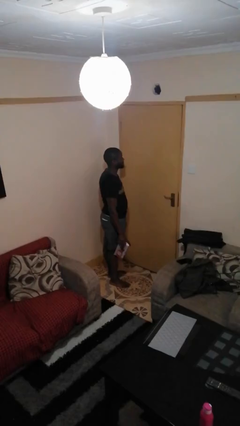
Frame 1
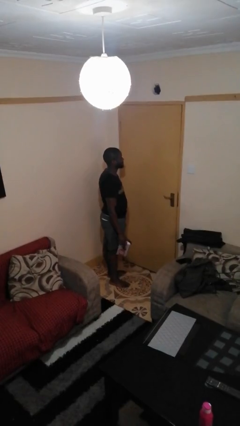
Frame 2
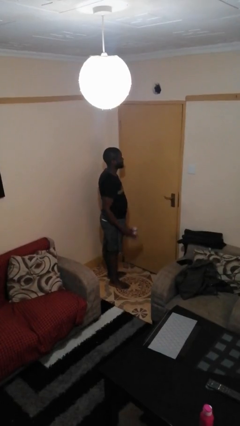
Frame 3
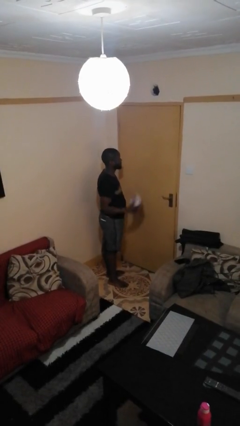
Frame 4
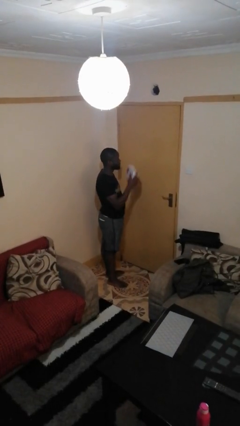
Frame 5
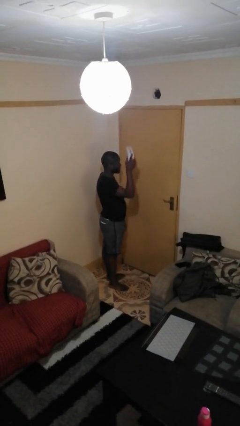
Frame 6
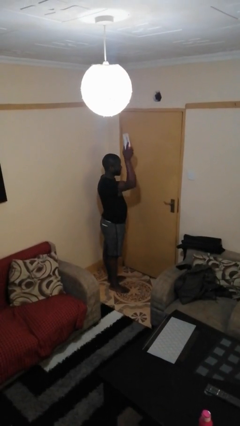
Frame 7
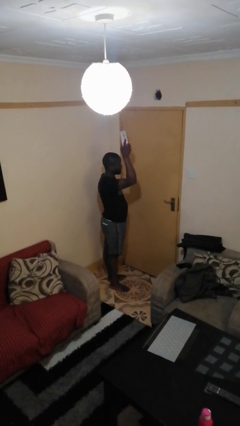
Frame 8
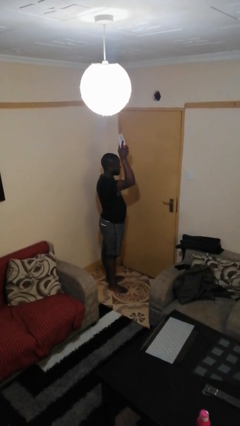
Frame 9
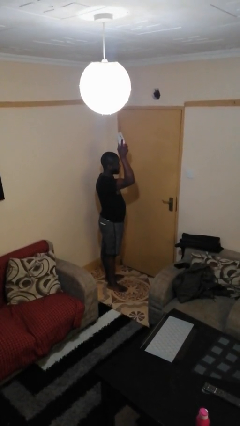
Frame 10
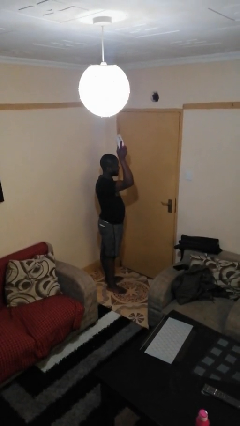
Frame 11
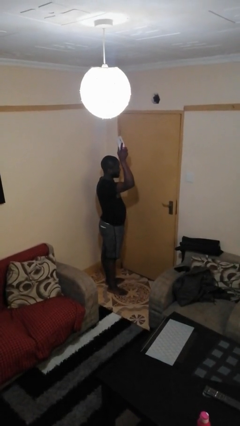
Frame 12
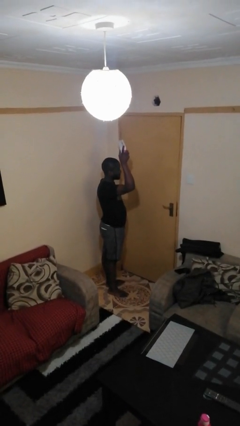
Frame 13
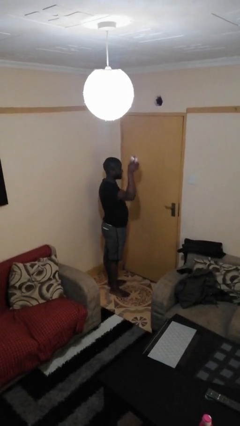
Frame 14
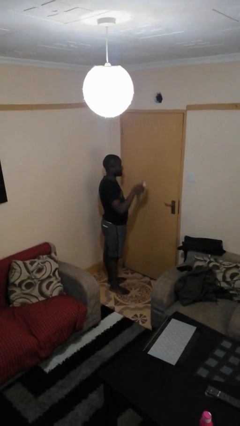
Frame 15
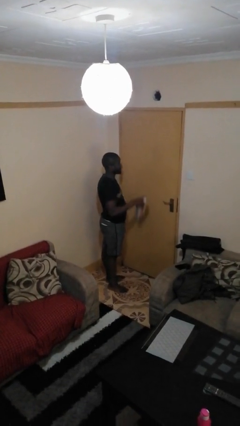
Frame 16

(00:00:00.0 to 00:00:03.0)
person holds object above head

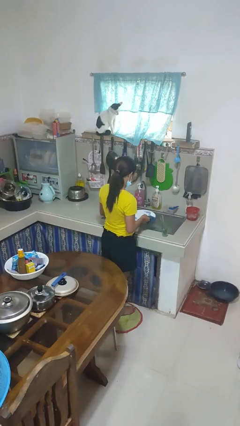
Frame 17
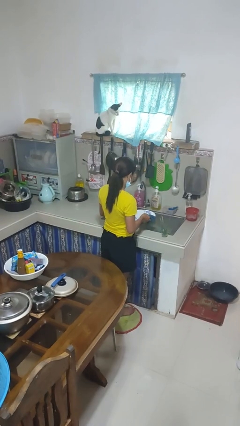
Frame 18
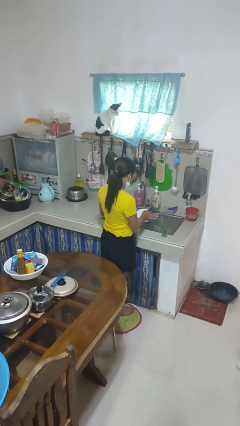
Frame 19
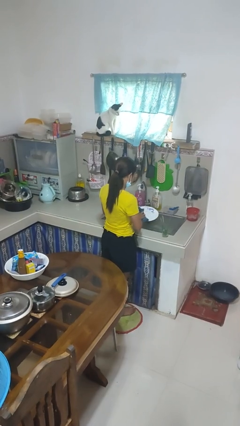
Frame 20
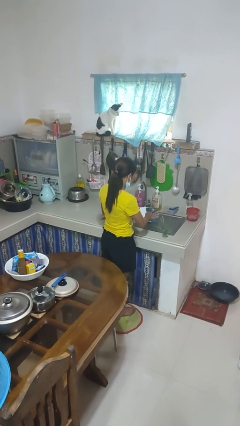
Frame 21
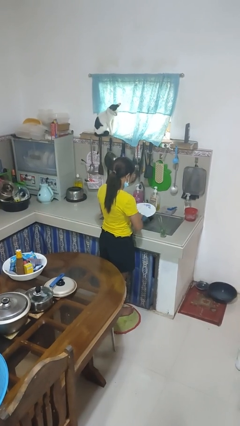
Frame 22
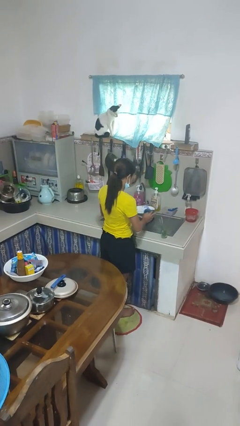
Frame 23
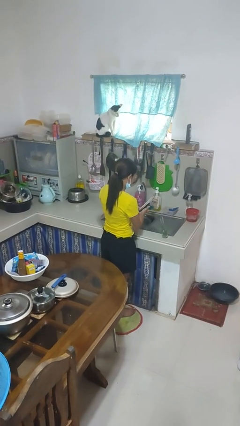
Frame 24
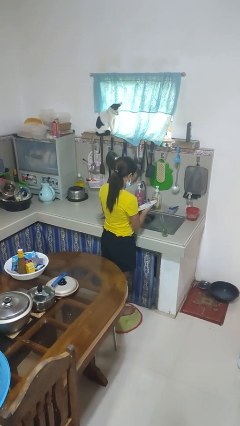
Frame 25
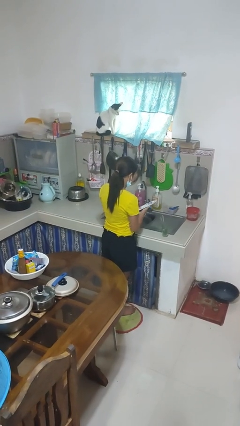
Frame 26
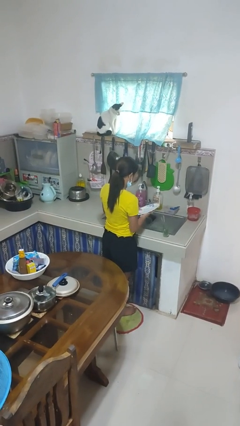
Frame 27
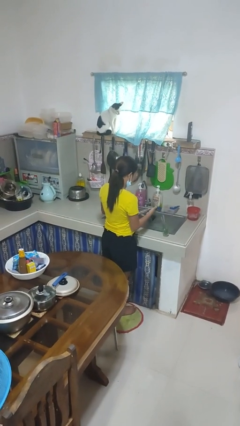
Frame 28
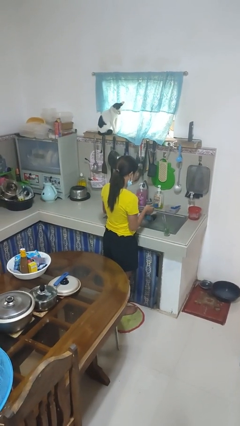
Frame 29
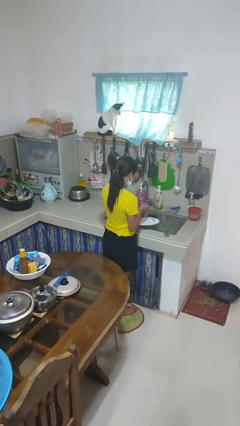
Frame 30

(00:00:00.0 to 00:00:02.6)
person dries dish

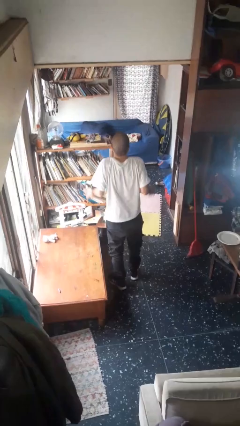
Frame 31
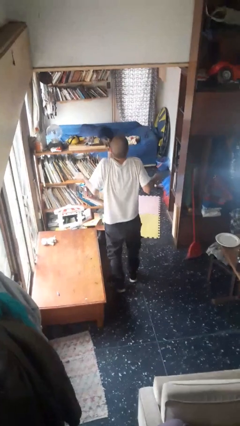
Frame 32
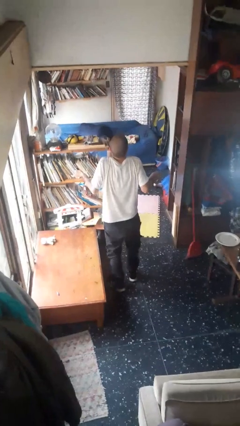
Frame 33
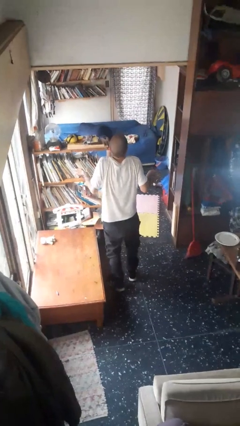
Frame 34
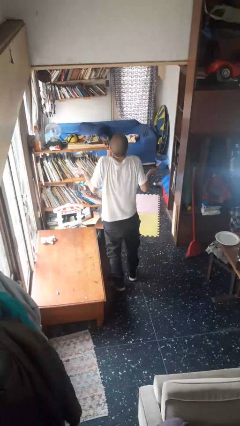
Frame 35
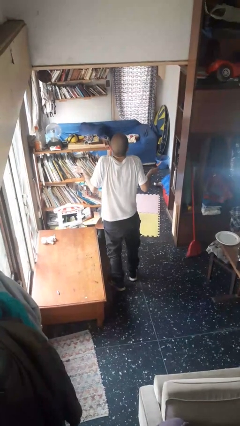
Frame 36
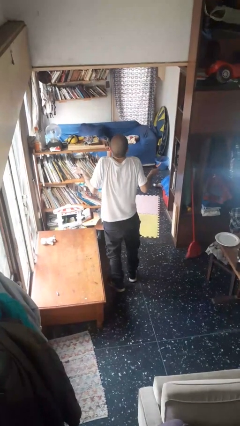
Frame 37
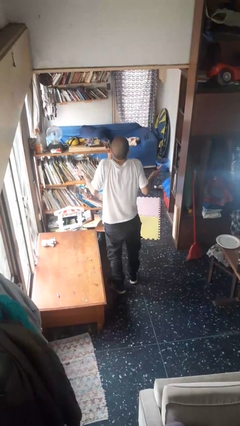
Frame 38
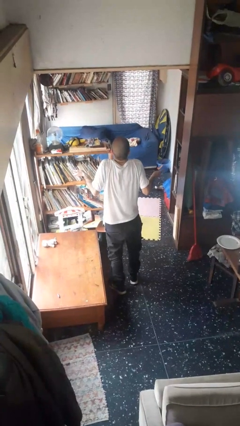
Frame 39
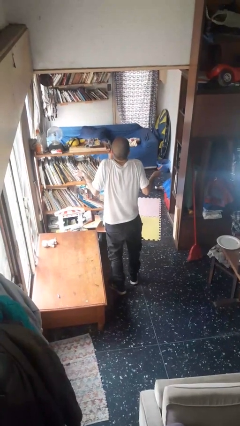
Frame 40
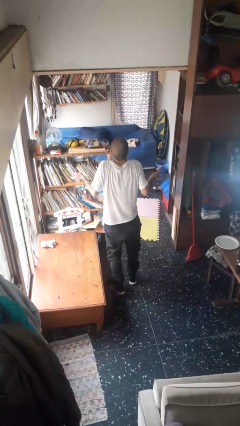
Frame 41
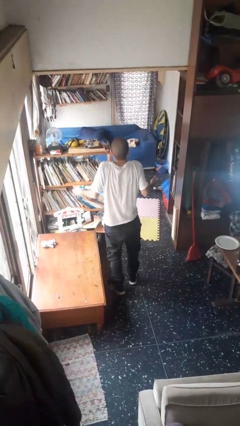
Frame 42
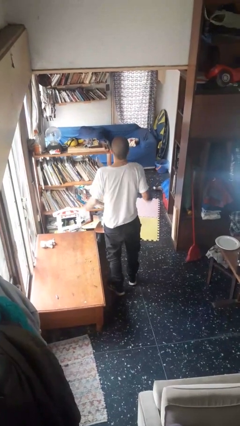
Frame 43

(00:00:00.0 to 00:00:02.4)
person shrugs

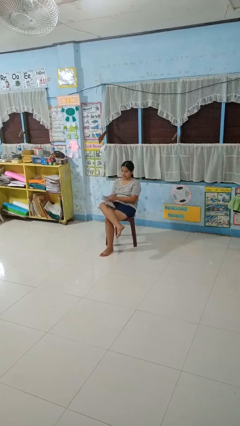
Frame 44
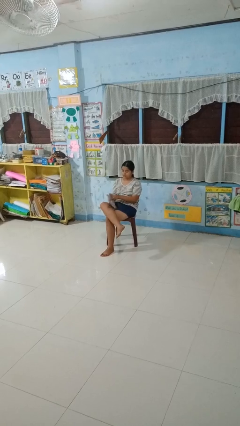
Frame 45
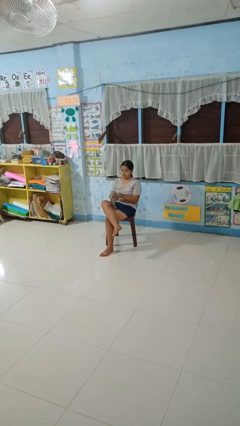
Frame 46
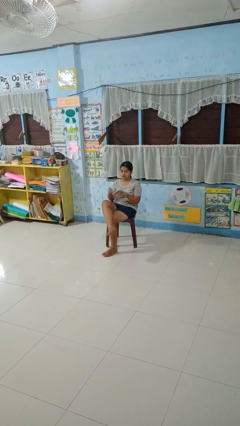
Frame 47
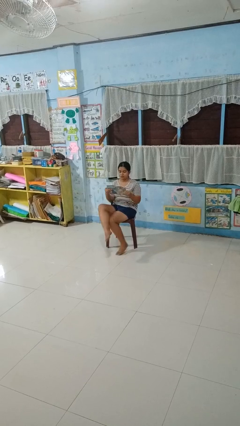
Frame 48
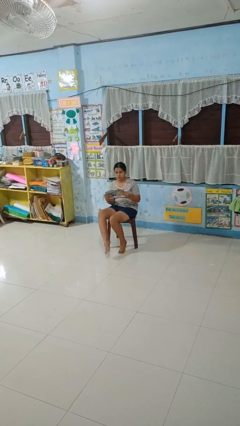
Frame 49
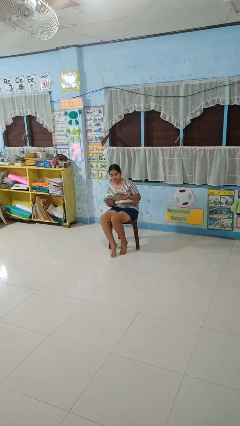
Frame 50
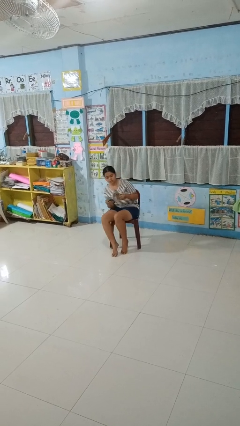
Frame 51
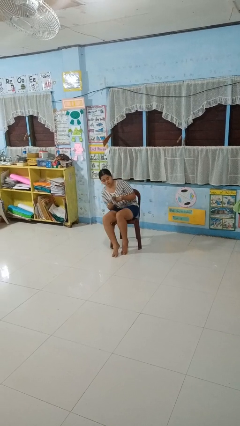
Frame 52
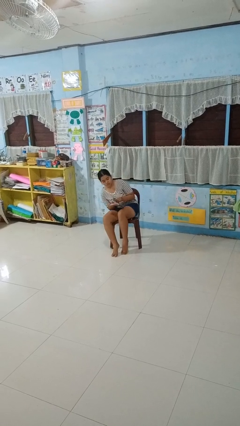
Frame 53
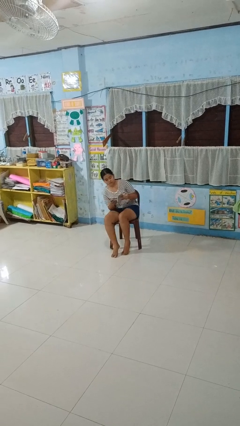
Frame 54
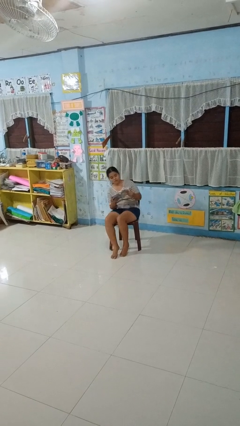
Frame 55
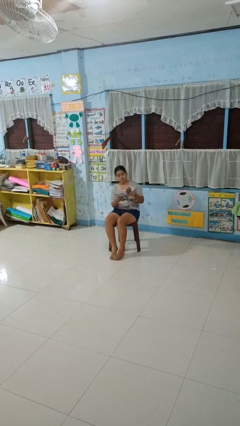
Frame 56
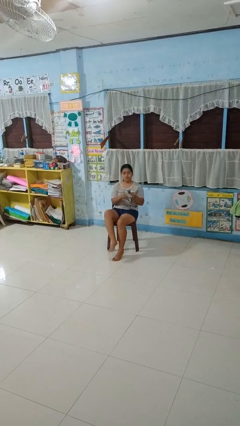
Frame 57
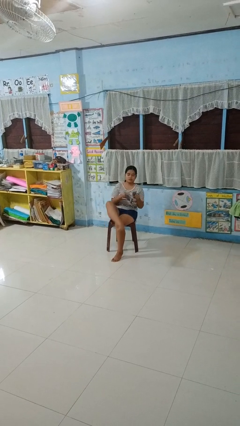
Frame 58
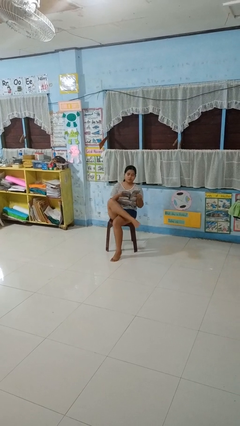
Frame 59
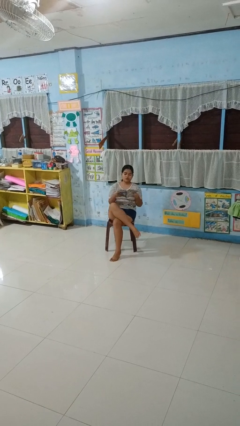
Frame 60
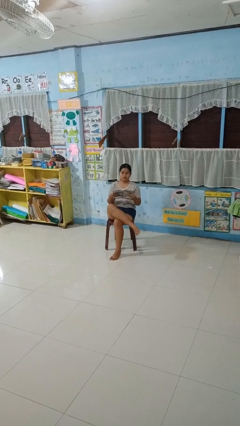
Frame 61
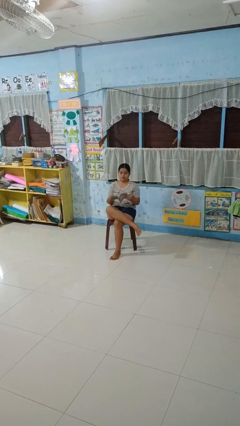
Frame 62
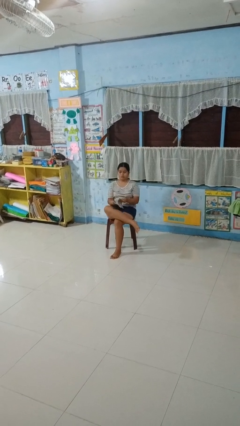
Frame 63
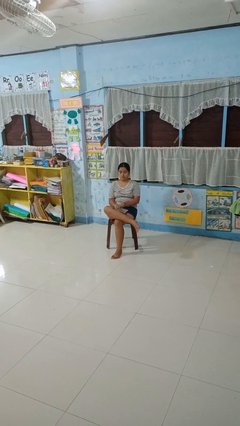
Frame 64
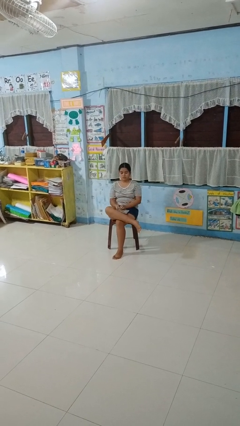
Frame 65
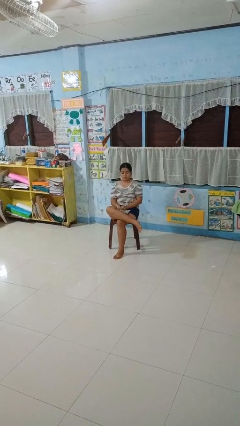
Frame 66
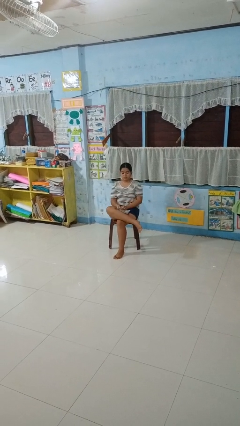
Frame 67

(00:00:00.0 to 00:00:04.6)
person reads magazine

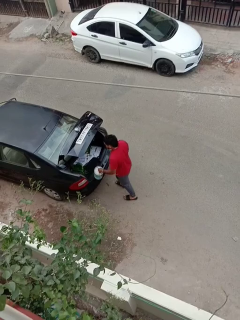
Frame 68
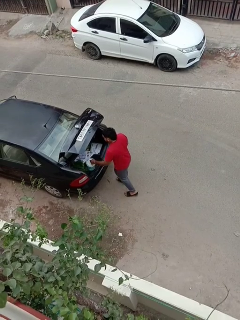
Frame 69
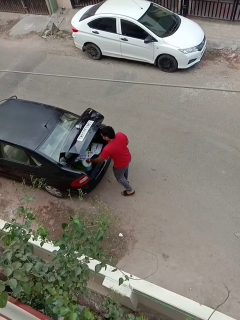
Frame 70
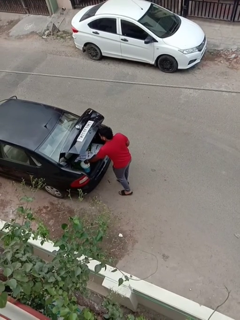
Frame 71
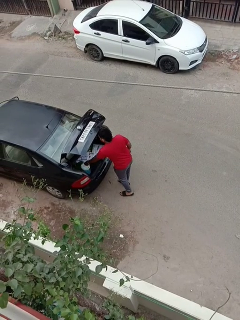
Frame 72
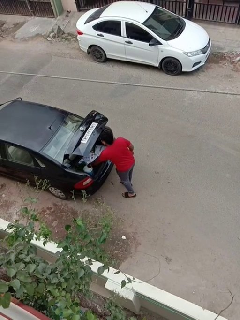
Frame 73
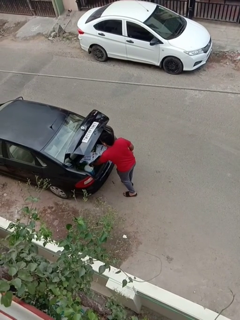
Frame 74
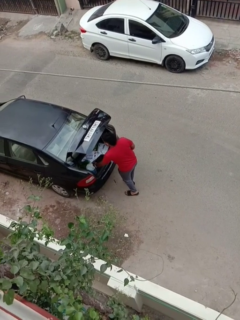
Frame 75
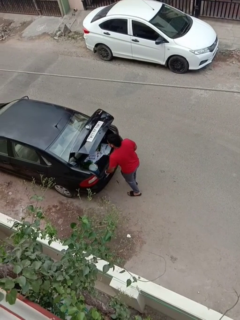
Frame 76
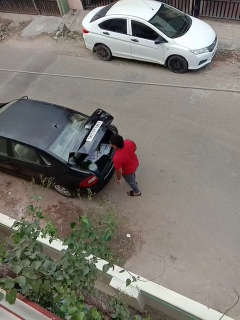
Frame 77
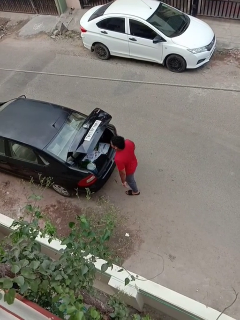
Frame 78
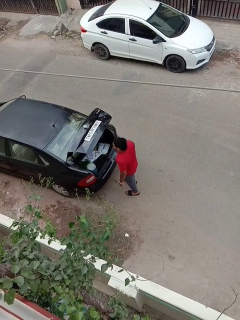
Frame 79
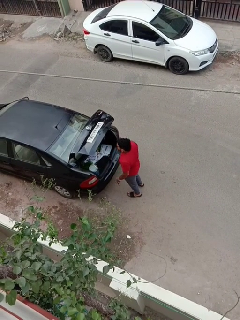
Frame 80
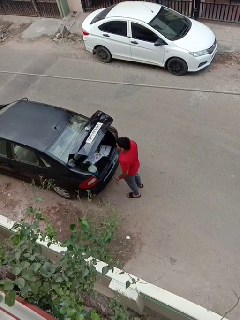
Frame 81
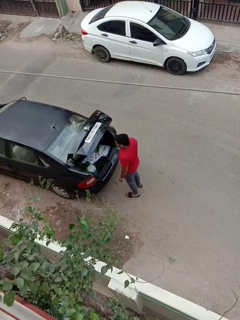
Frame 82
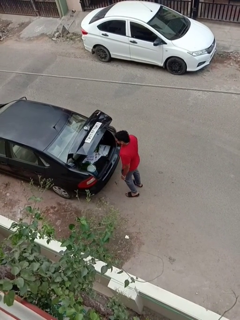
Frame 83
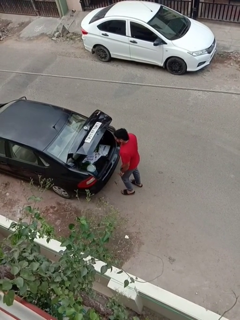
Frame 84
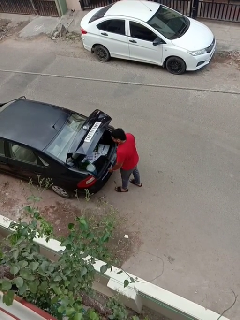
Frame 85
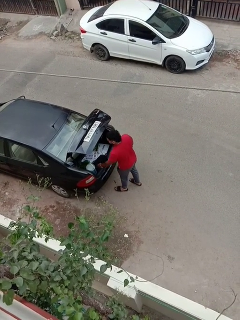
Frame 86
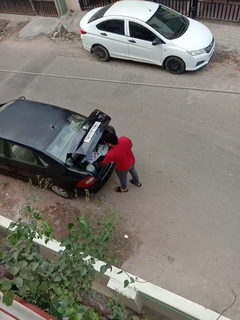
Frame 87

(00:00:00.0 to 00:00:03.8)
person loads car

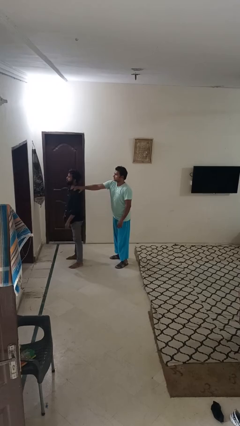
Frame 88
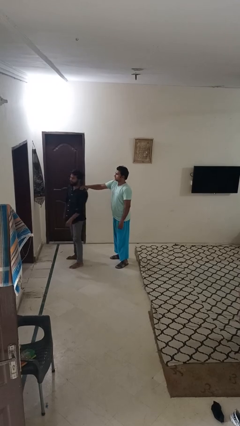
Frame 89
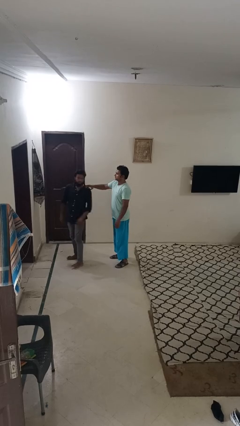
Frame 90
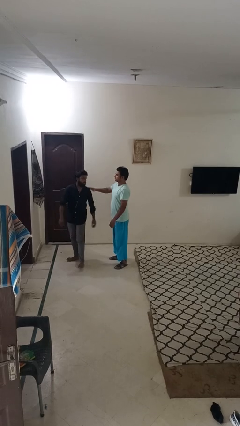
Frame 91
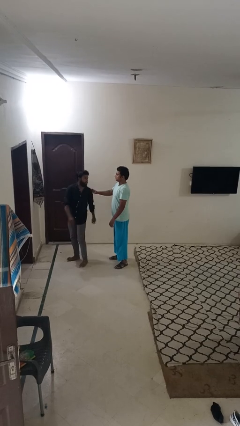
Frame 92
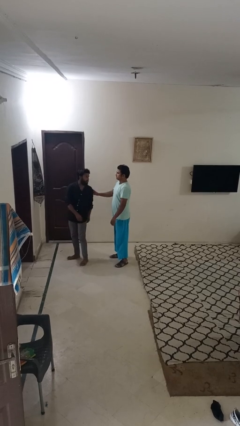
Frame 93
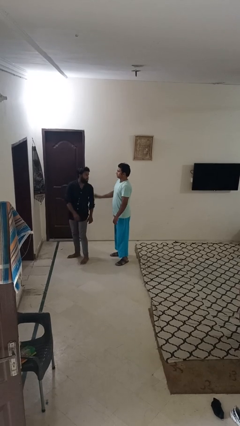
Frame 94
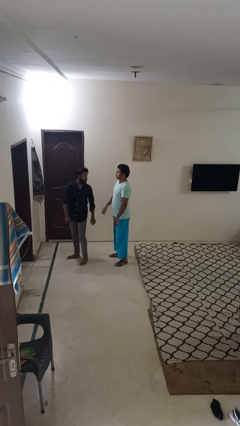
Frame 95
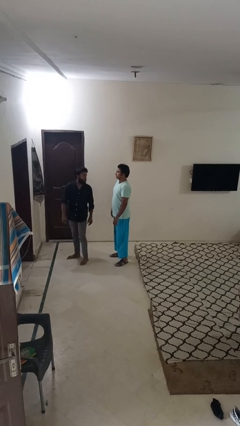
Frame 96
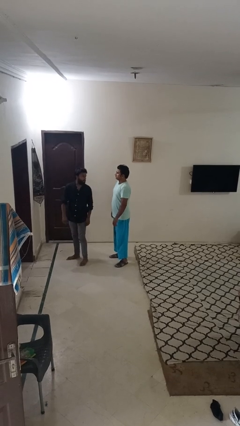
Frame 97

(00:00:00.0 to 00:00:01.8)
person spins person around

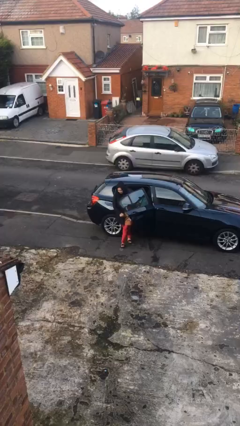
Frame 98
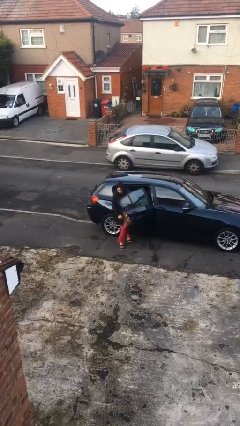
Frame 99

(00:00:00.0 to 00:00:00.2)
person closes car door
